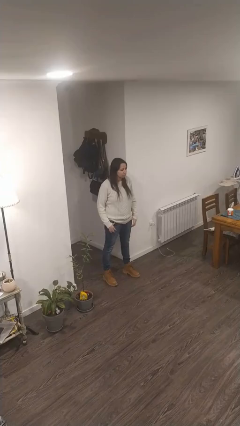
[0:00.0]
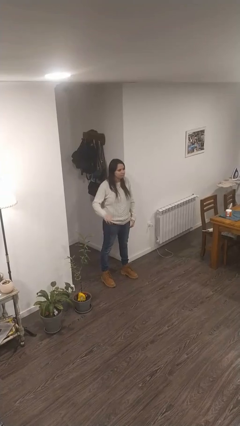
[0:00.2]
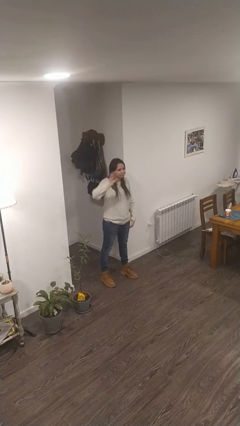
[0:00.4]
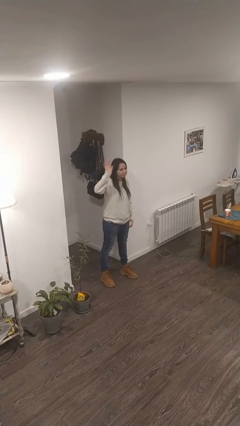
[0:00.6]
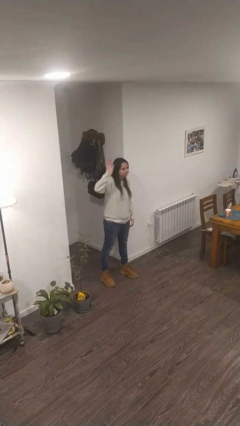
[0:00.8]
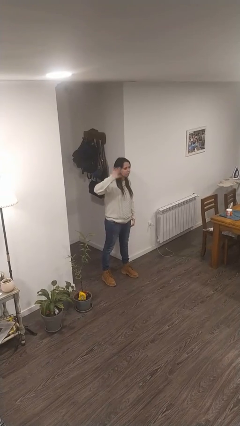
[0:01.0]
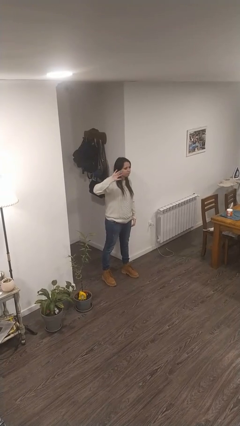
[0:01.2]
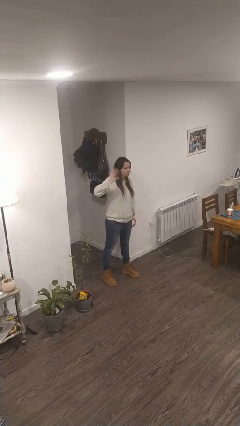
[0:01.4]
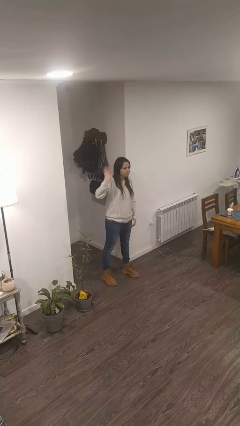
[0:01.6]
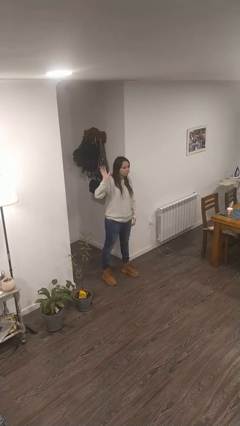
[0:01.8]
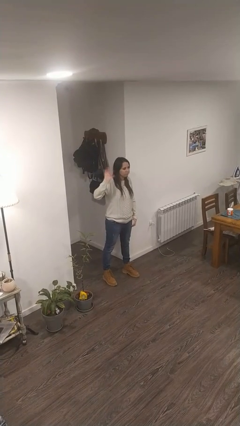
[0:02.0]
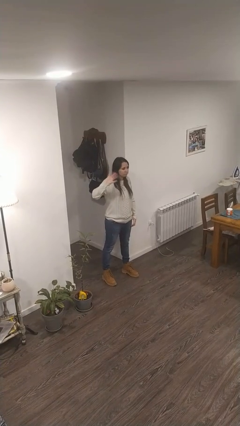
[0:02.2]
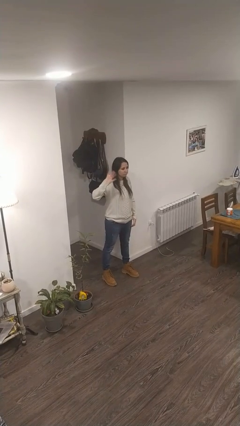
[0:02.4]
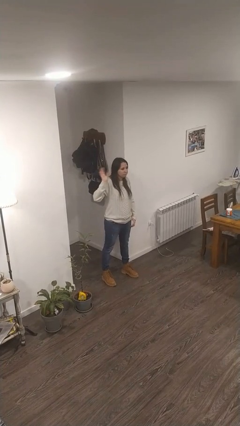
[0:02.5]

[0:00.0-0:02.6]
person waves at person

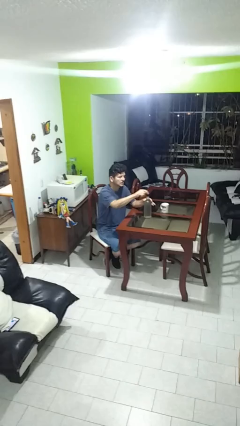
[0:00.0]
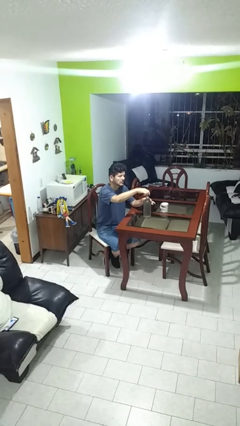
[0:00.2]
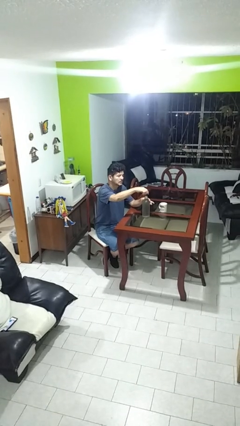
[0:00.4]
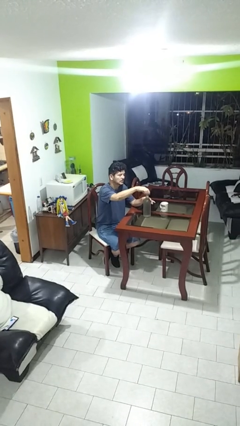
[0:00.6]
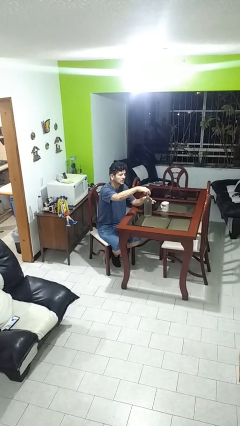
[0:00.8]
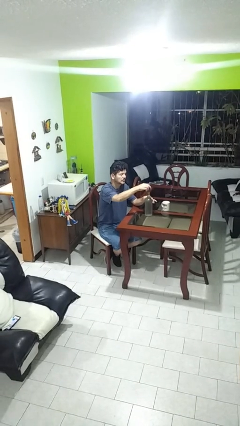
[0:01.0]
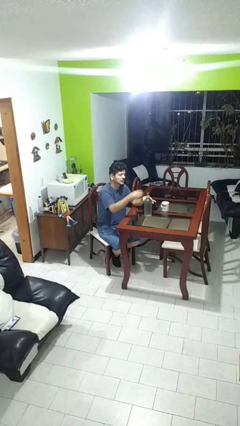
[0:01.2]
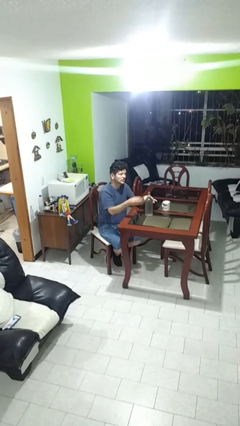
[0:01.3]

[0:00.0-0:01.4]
person unscrews lid from bottle

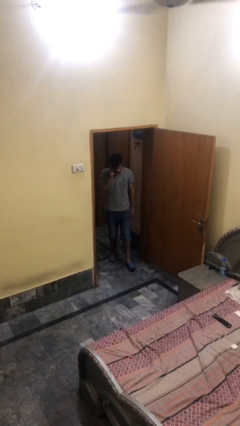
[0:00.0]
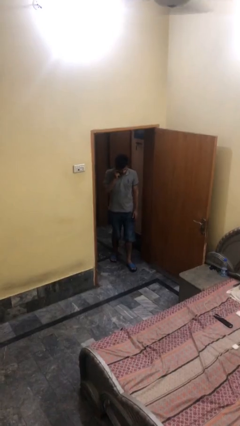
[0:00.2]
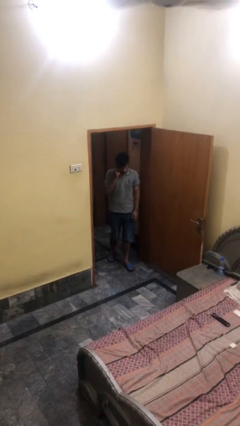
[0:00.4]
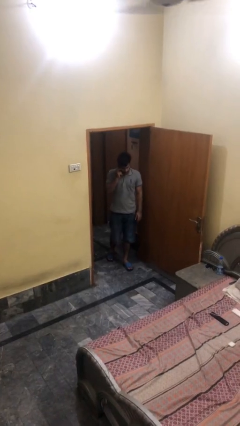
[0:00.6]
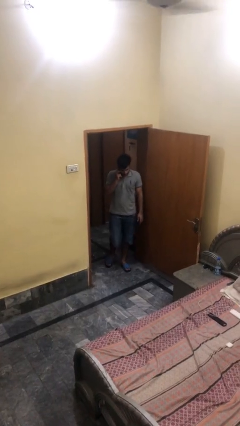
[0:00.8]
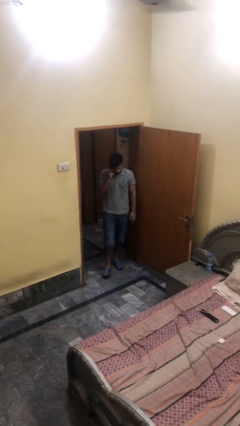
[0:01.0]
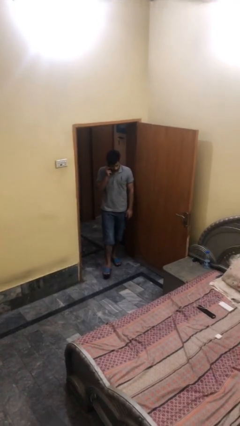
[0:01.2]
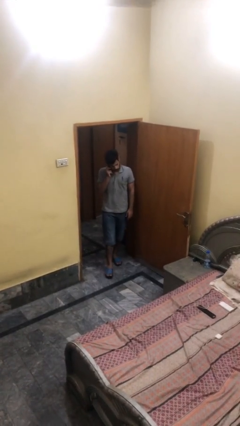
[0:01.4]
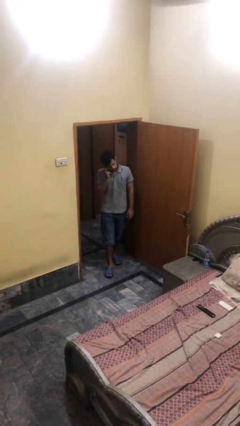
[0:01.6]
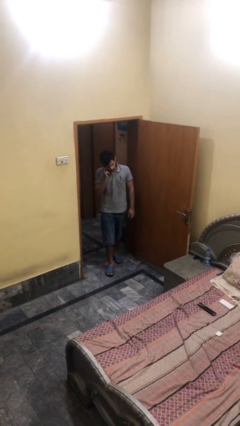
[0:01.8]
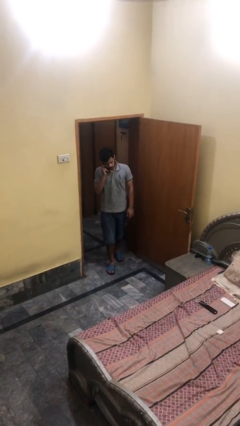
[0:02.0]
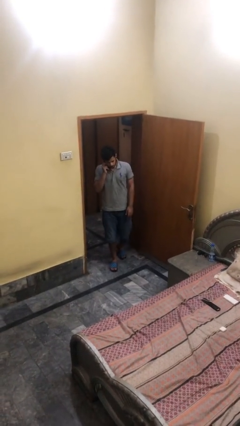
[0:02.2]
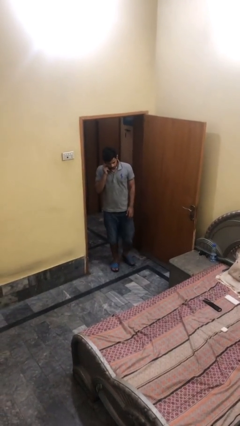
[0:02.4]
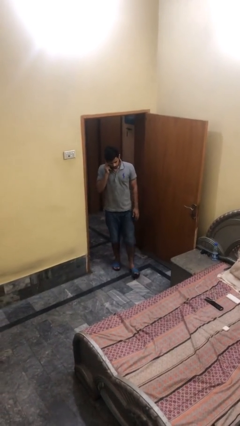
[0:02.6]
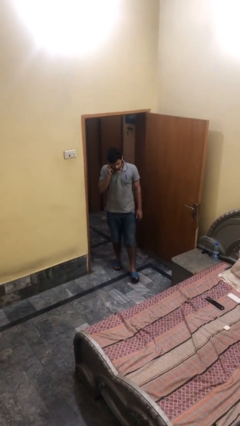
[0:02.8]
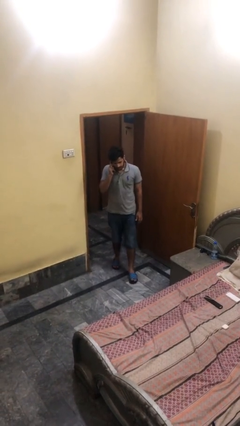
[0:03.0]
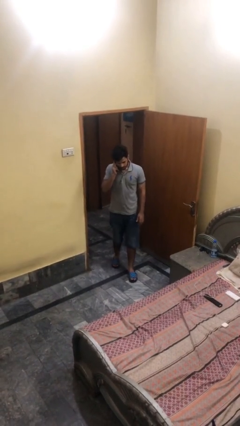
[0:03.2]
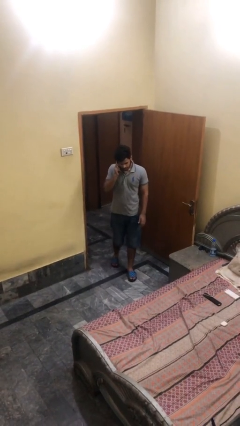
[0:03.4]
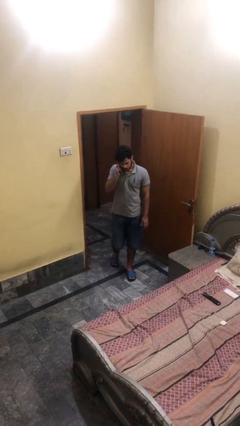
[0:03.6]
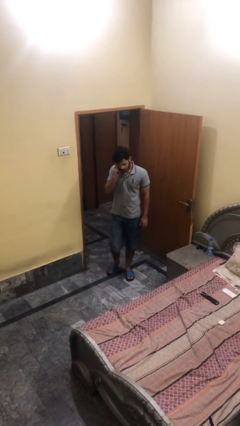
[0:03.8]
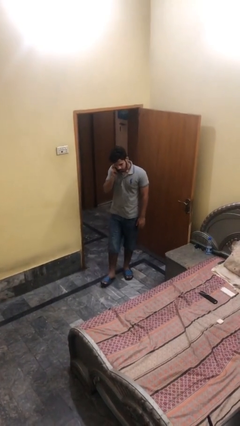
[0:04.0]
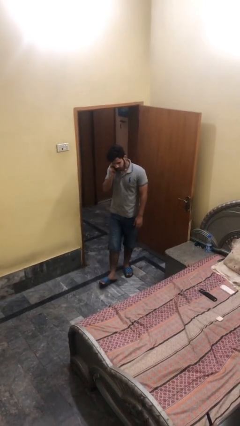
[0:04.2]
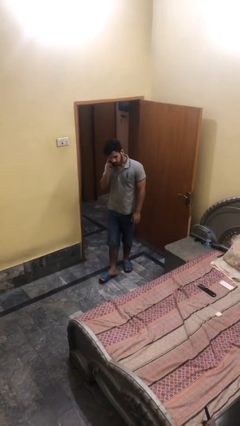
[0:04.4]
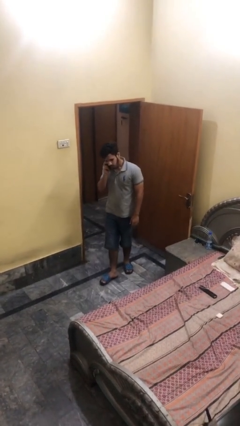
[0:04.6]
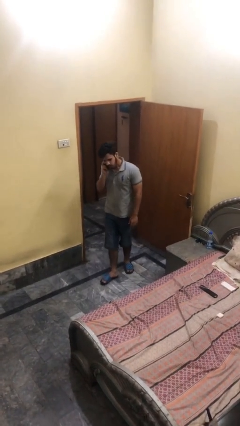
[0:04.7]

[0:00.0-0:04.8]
person enters scene through structure

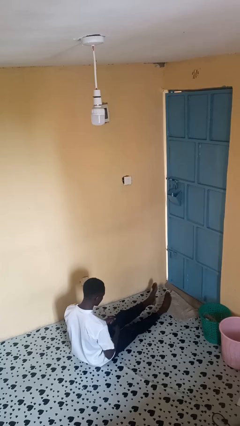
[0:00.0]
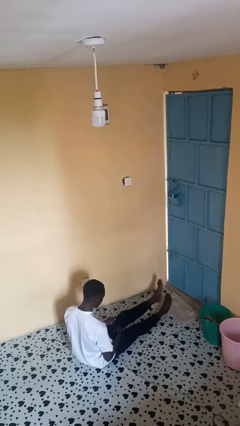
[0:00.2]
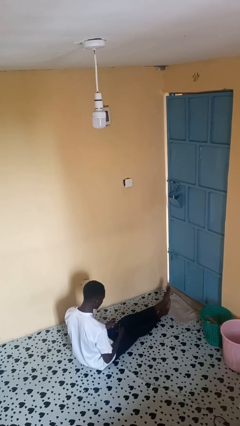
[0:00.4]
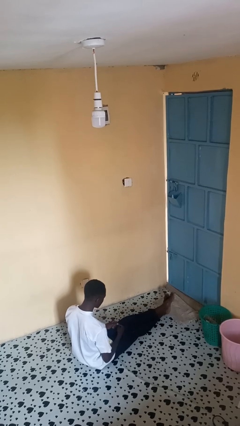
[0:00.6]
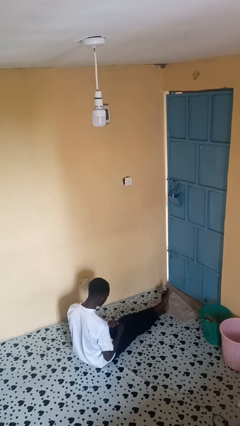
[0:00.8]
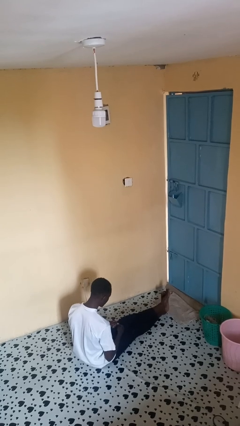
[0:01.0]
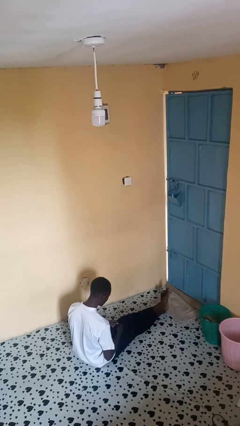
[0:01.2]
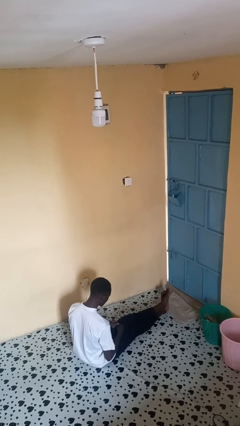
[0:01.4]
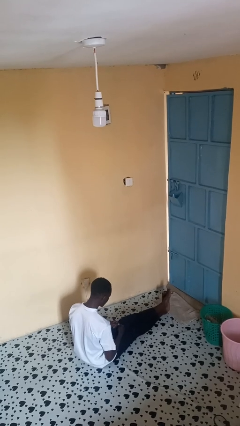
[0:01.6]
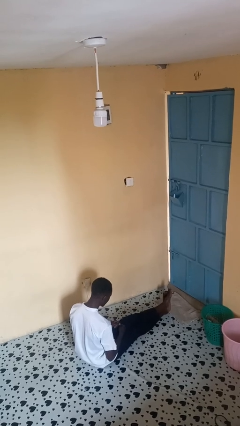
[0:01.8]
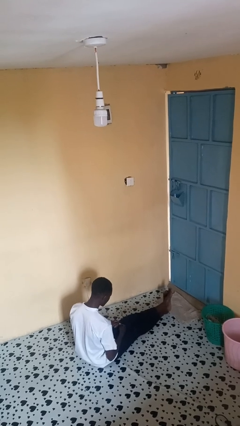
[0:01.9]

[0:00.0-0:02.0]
person crosses legs

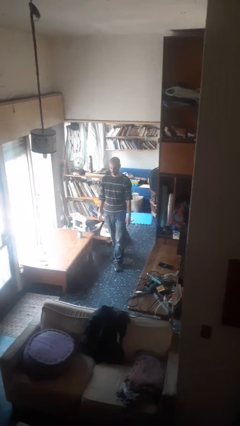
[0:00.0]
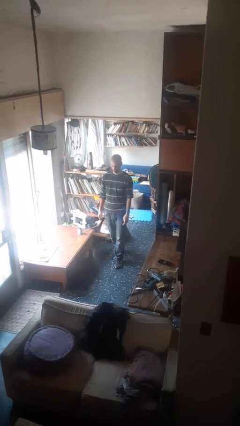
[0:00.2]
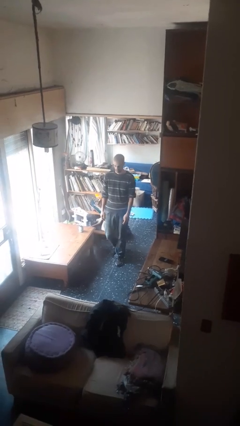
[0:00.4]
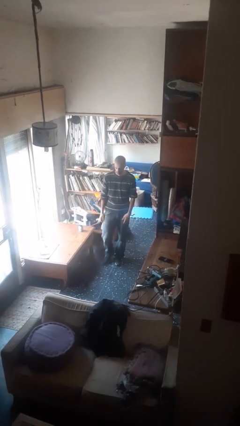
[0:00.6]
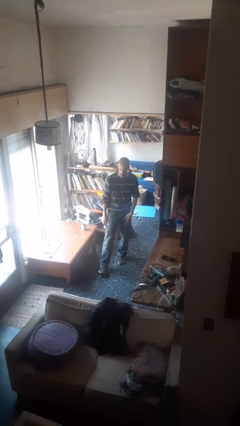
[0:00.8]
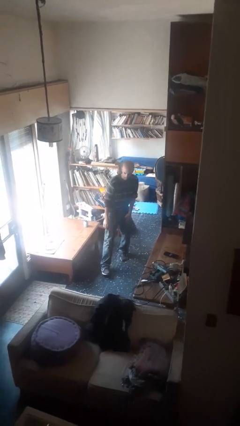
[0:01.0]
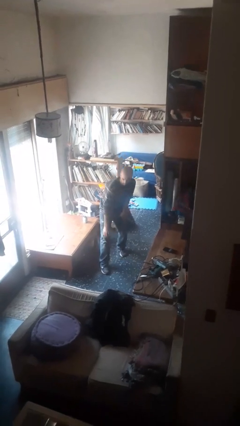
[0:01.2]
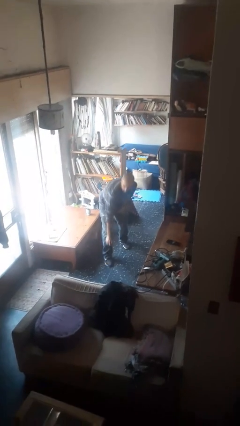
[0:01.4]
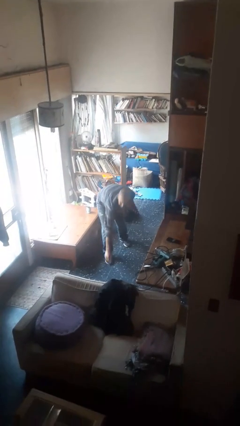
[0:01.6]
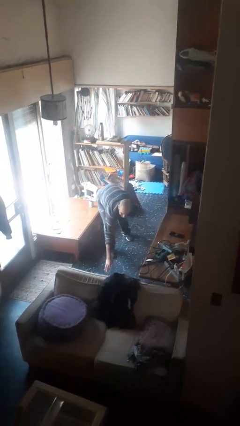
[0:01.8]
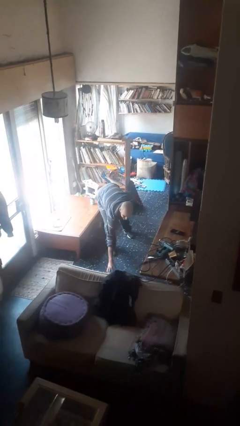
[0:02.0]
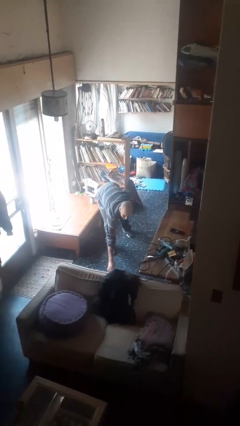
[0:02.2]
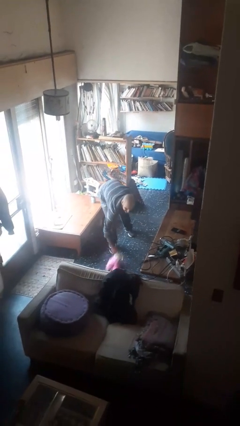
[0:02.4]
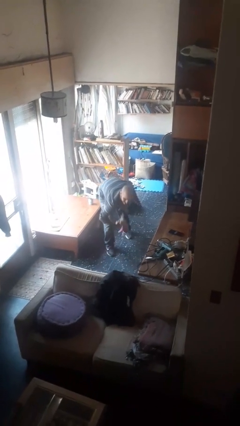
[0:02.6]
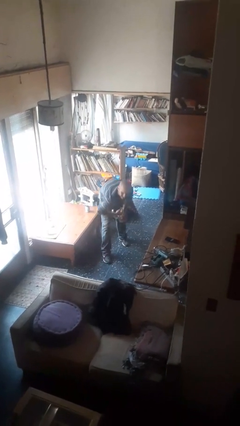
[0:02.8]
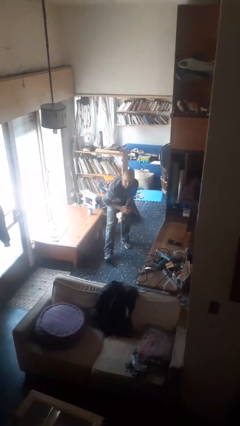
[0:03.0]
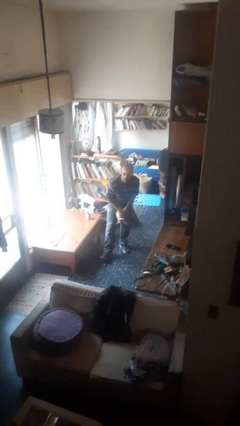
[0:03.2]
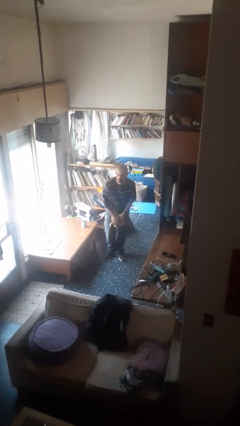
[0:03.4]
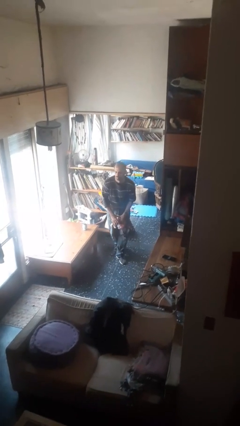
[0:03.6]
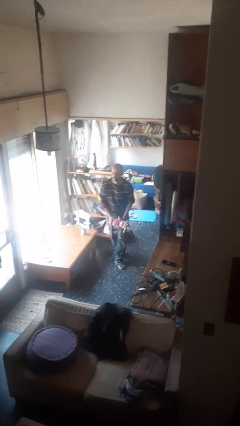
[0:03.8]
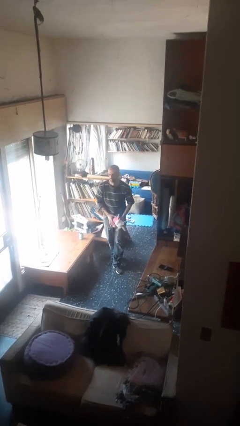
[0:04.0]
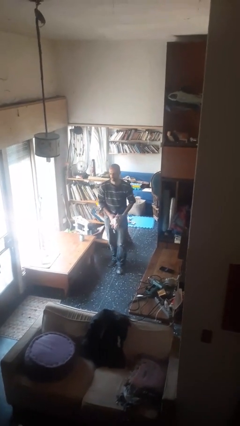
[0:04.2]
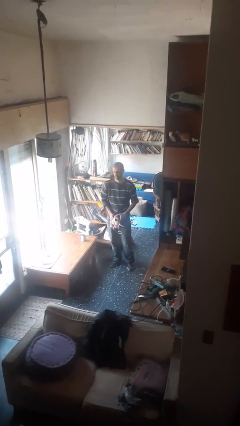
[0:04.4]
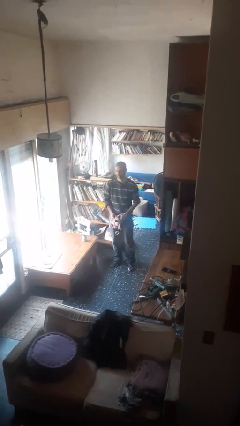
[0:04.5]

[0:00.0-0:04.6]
person picks up object from floor

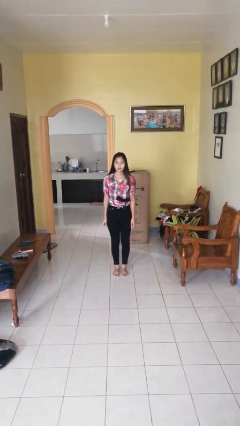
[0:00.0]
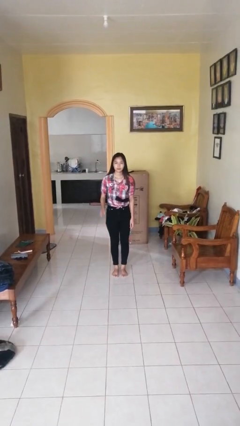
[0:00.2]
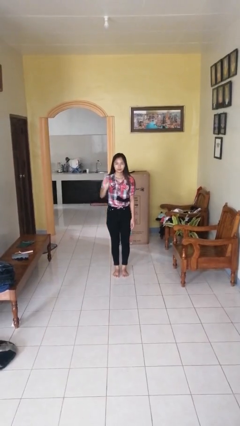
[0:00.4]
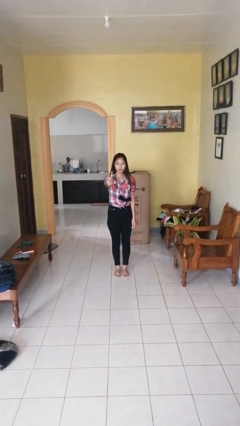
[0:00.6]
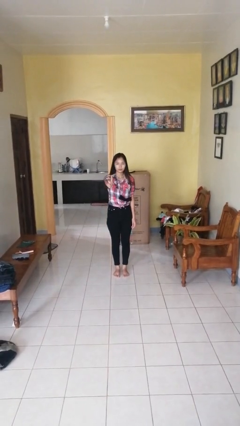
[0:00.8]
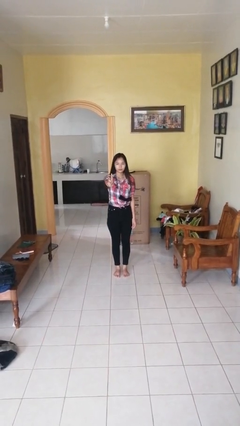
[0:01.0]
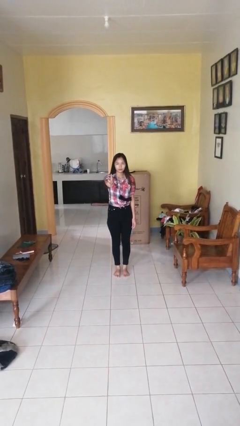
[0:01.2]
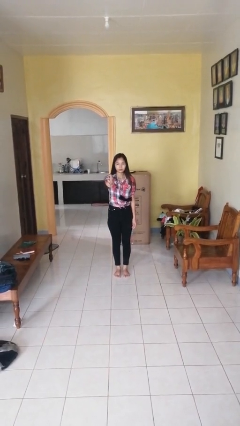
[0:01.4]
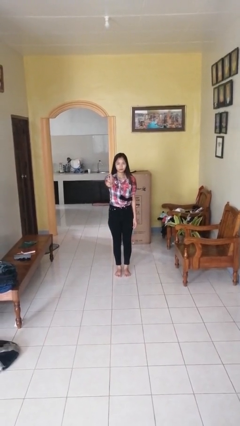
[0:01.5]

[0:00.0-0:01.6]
person gestures number one
